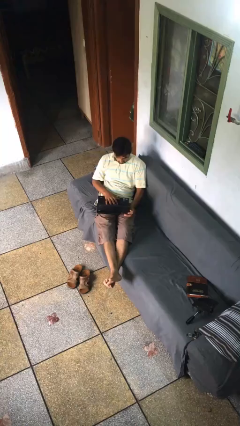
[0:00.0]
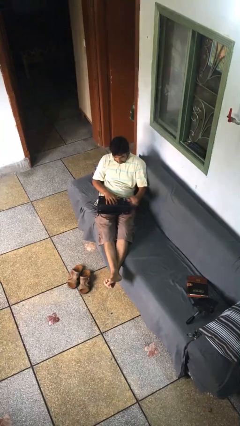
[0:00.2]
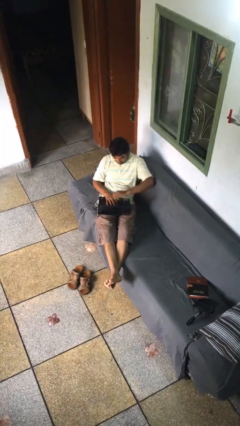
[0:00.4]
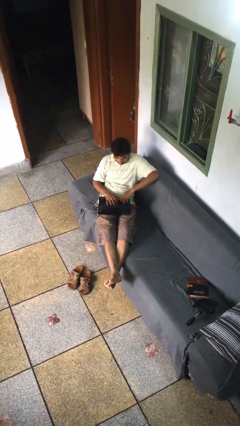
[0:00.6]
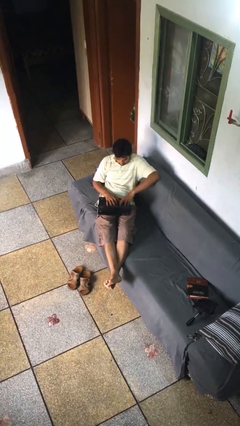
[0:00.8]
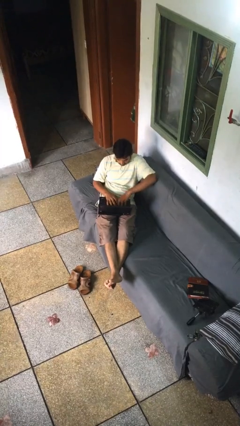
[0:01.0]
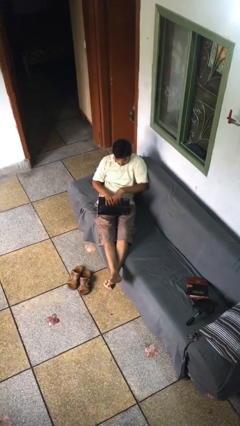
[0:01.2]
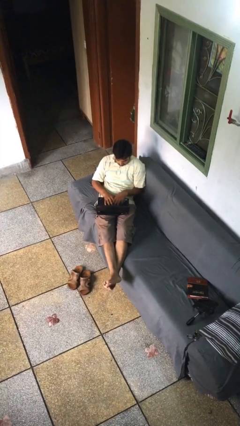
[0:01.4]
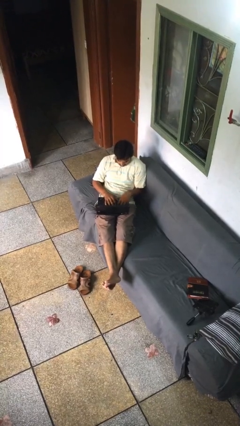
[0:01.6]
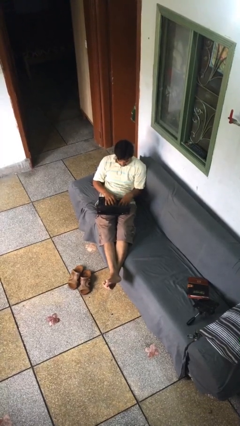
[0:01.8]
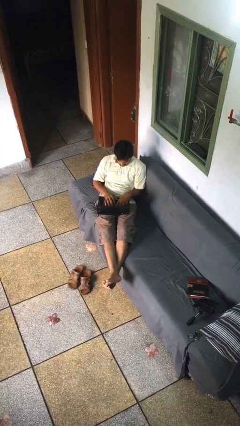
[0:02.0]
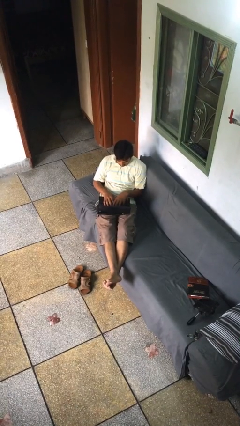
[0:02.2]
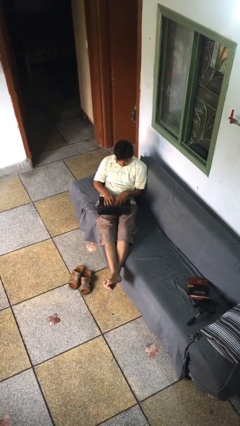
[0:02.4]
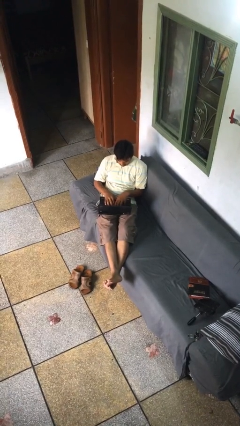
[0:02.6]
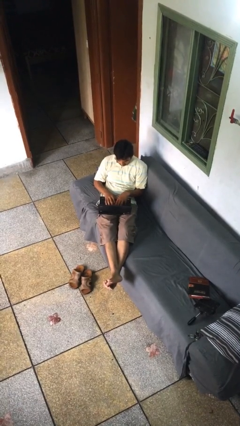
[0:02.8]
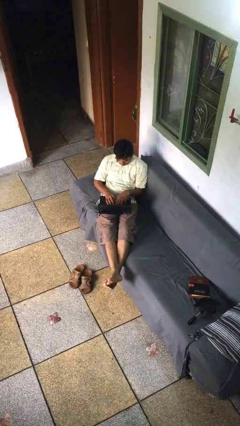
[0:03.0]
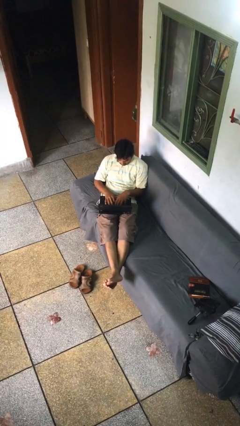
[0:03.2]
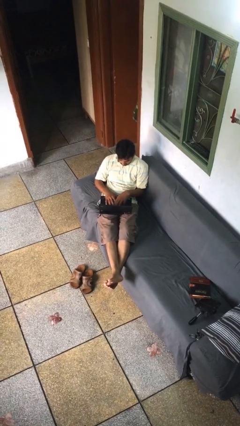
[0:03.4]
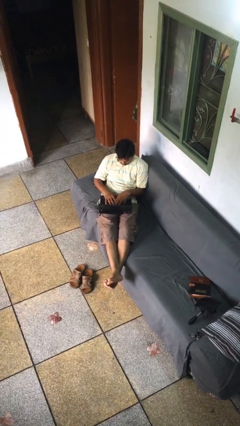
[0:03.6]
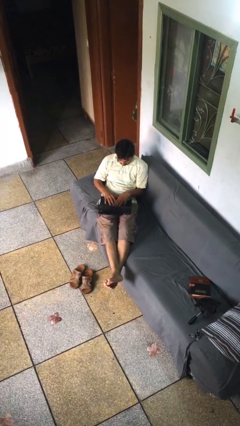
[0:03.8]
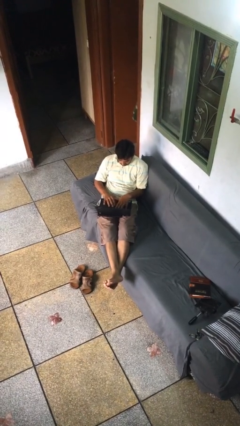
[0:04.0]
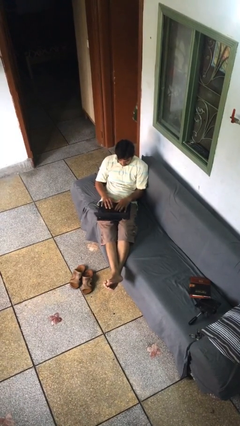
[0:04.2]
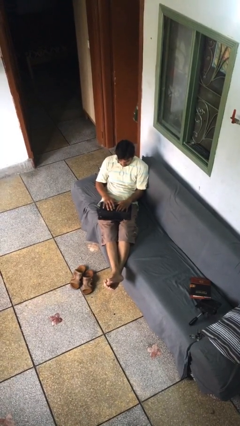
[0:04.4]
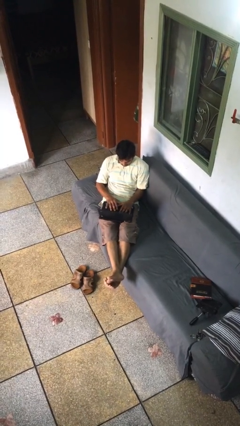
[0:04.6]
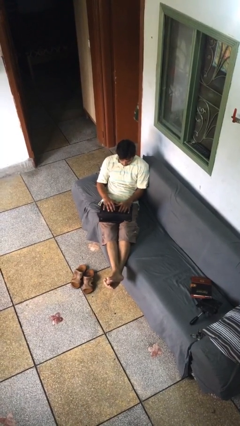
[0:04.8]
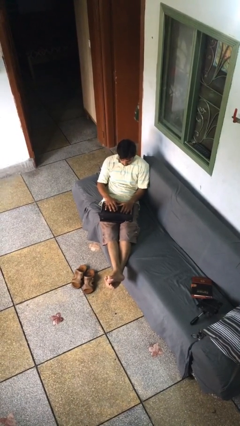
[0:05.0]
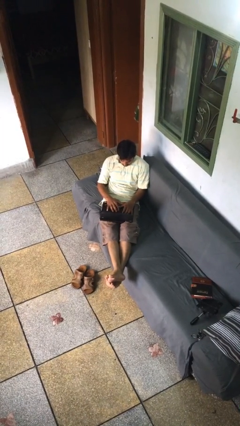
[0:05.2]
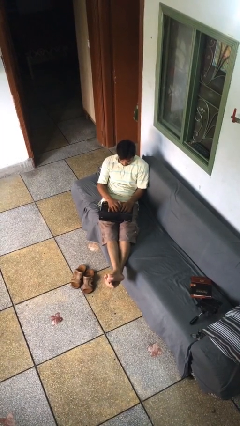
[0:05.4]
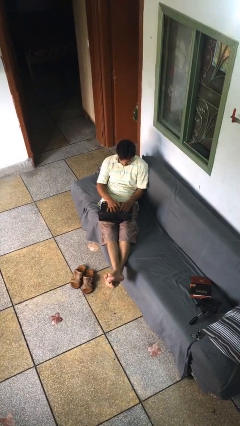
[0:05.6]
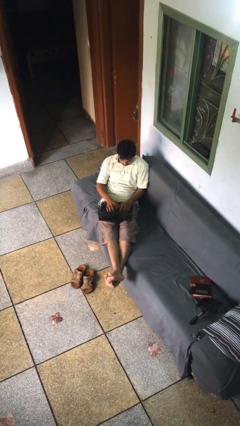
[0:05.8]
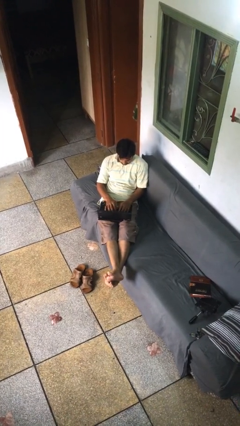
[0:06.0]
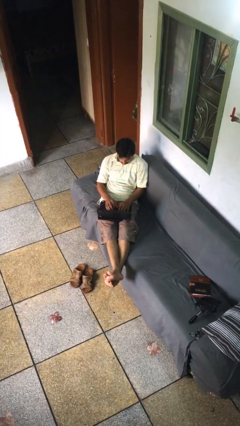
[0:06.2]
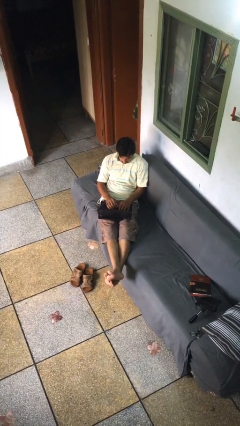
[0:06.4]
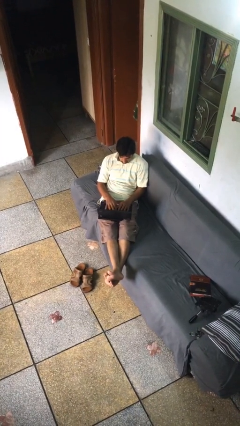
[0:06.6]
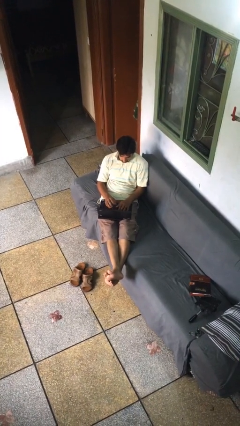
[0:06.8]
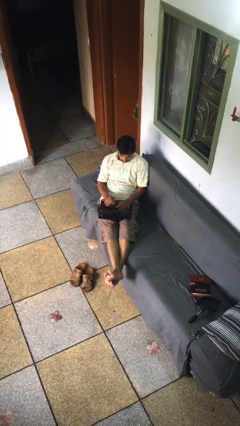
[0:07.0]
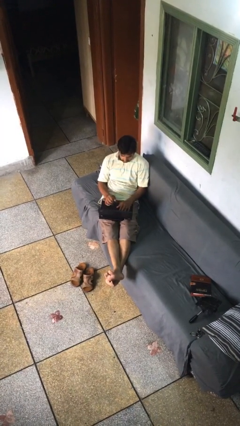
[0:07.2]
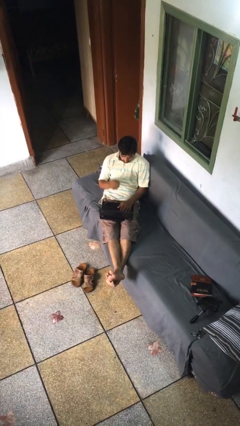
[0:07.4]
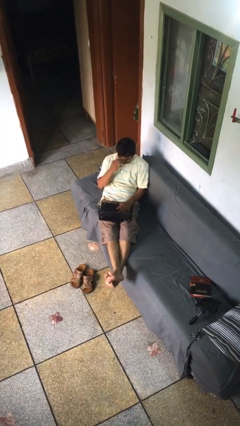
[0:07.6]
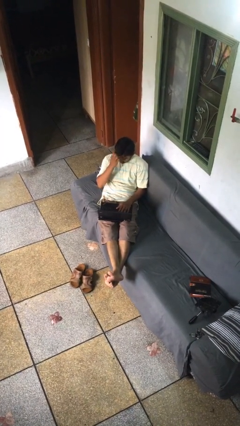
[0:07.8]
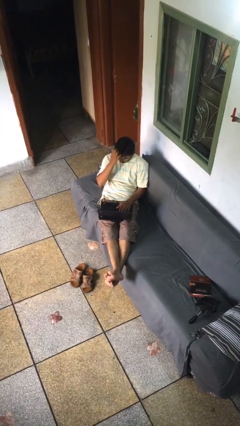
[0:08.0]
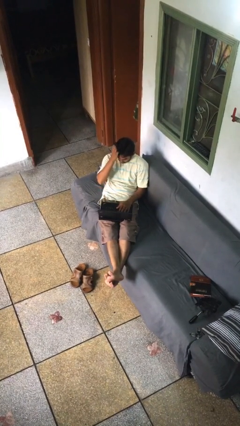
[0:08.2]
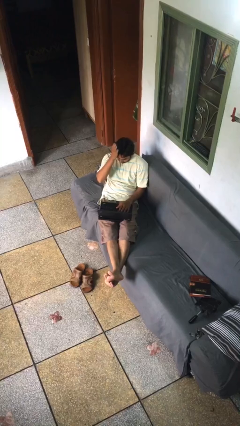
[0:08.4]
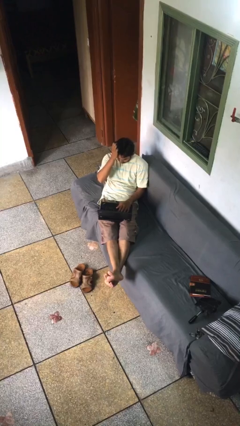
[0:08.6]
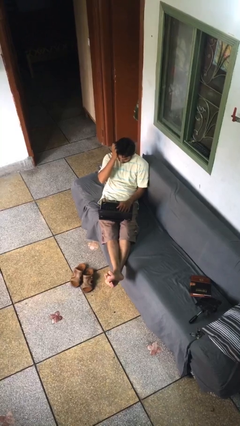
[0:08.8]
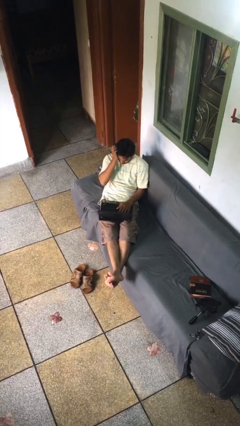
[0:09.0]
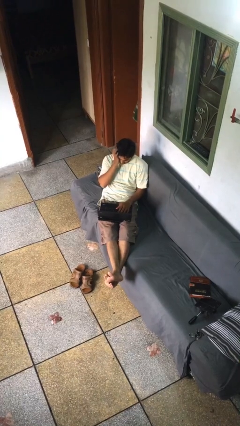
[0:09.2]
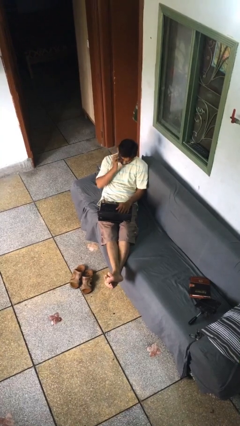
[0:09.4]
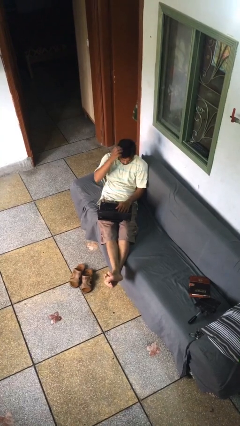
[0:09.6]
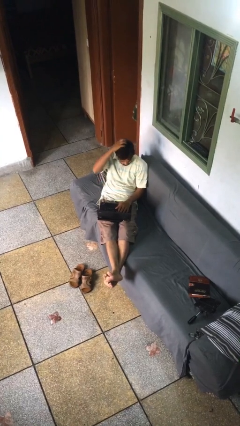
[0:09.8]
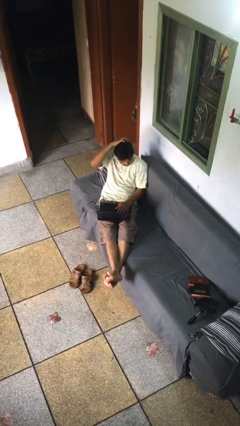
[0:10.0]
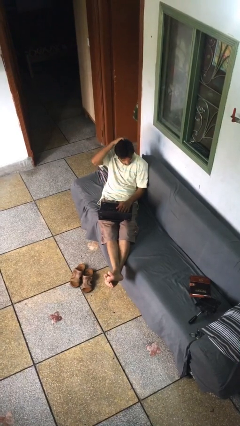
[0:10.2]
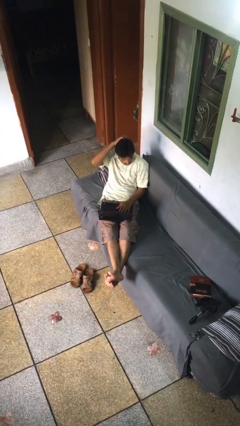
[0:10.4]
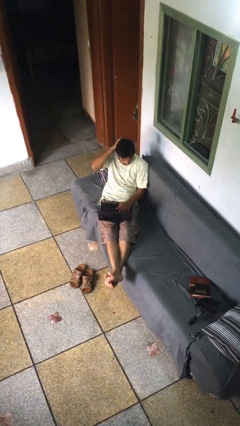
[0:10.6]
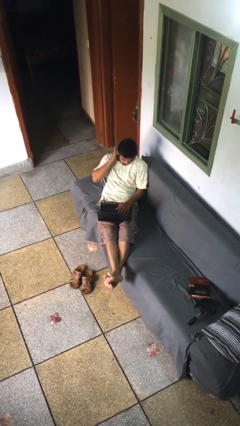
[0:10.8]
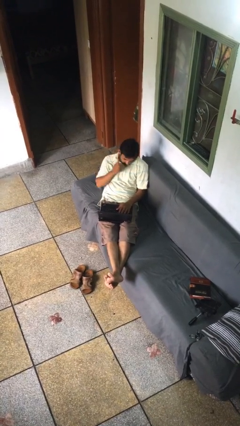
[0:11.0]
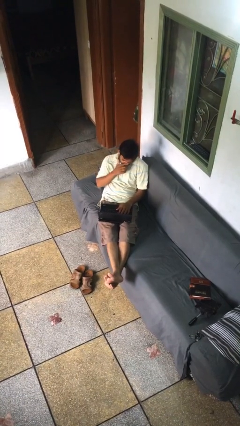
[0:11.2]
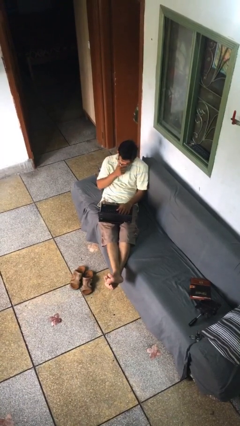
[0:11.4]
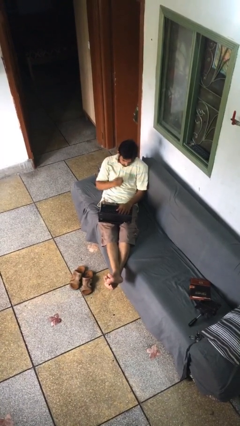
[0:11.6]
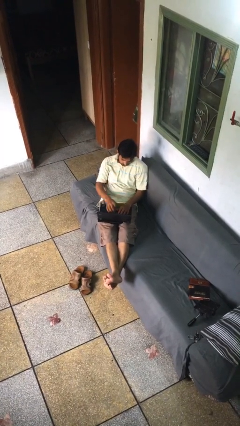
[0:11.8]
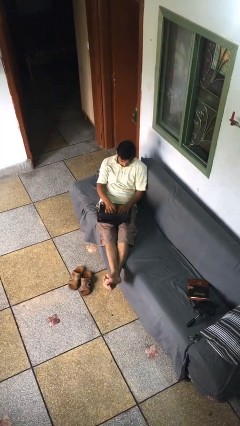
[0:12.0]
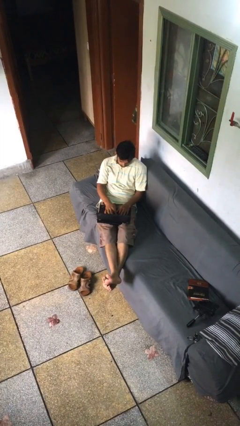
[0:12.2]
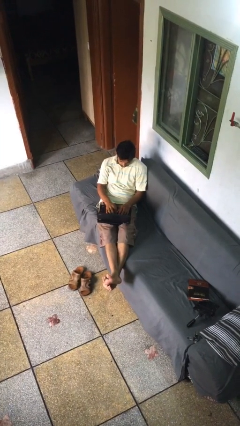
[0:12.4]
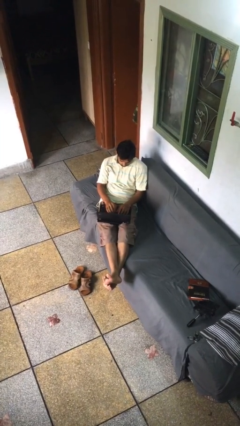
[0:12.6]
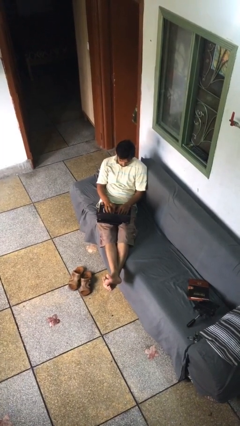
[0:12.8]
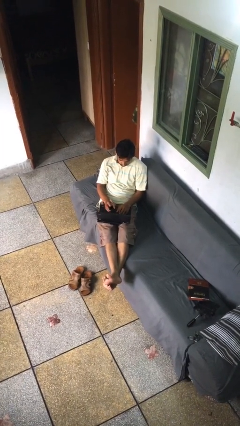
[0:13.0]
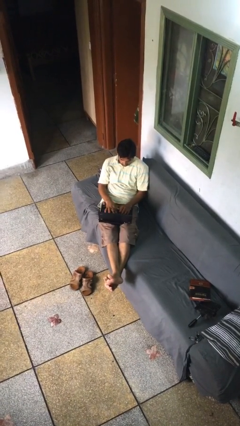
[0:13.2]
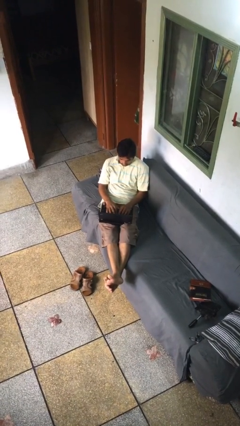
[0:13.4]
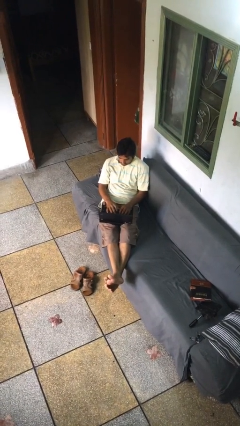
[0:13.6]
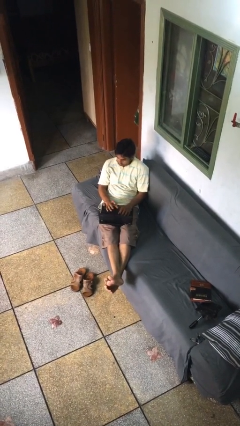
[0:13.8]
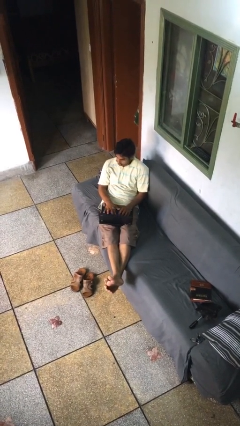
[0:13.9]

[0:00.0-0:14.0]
person interacts with laptop

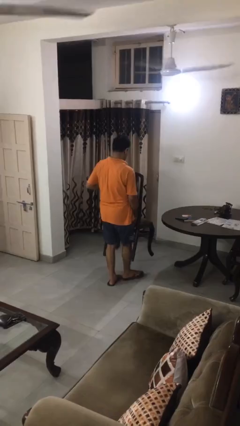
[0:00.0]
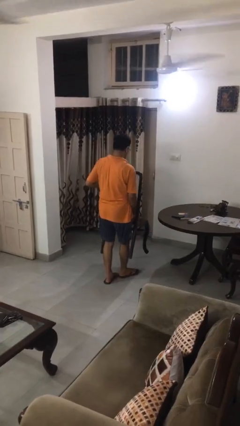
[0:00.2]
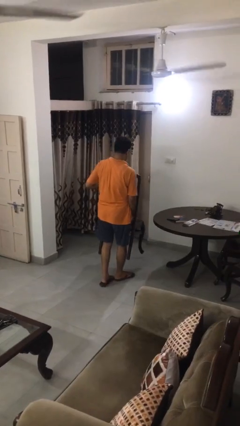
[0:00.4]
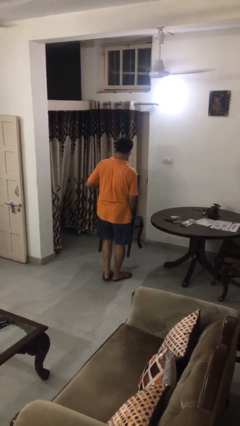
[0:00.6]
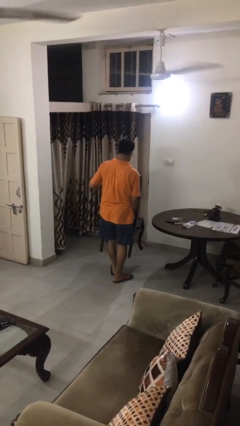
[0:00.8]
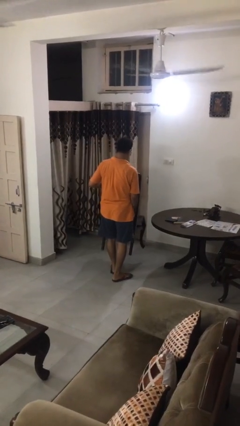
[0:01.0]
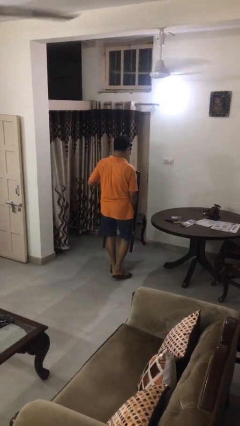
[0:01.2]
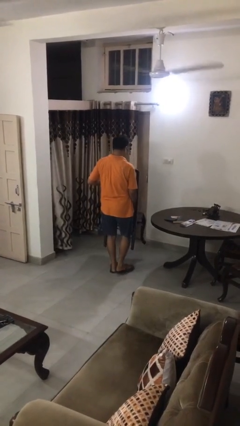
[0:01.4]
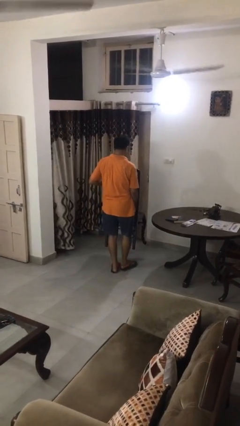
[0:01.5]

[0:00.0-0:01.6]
person carries furniture

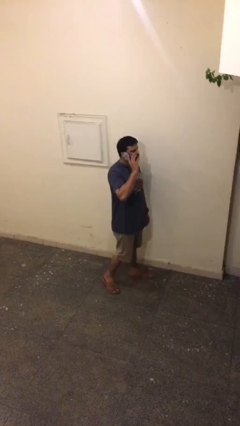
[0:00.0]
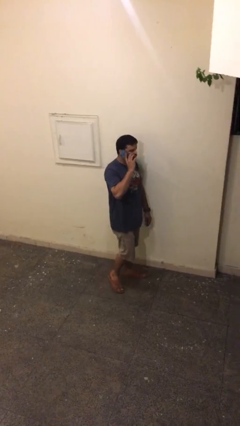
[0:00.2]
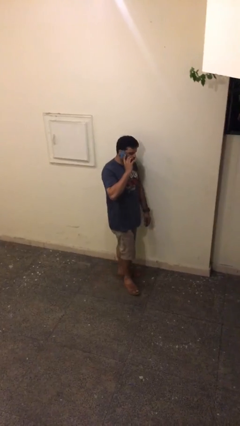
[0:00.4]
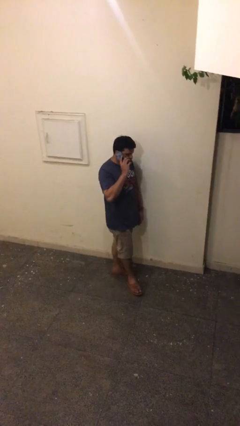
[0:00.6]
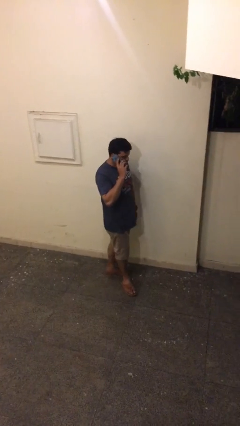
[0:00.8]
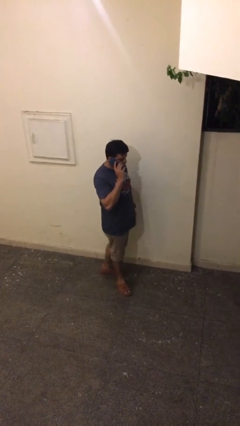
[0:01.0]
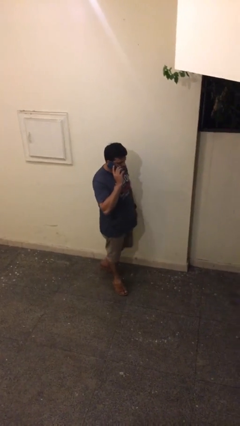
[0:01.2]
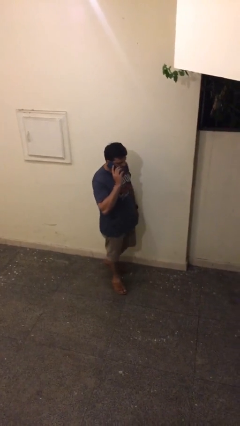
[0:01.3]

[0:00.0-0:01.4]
person talks on phone

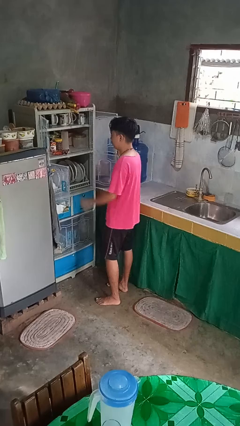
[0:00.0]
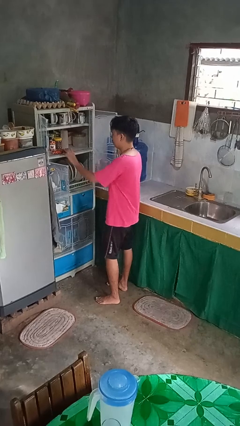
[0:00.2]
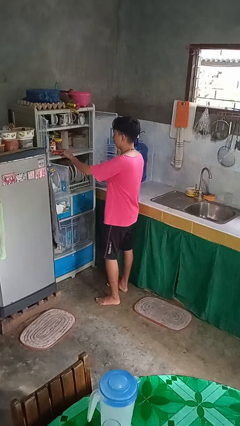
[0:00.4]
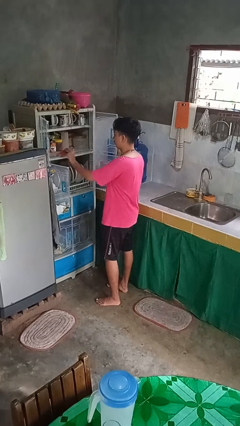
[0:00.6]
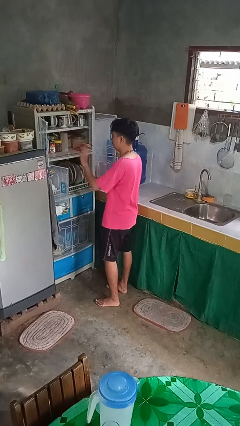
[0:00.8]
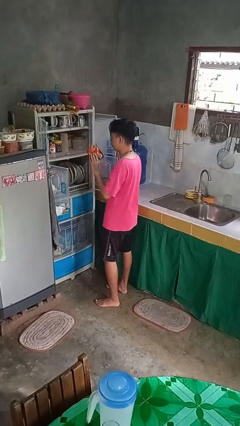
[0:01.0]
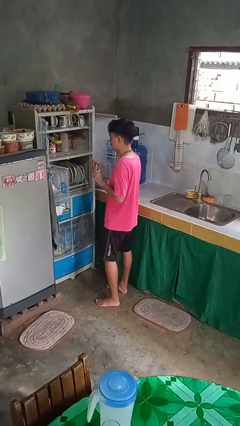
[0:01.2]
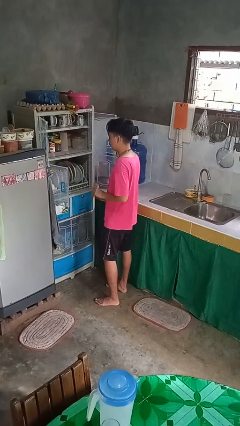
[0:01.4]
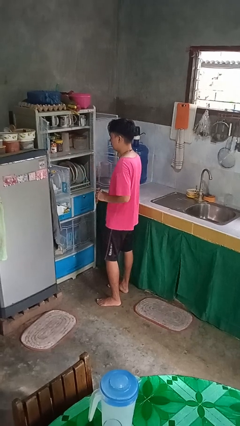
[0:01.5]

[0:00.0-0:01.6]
person takes object from cabinet
